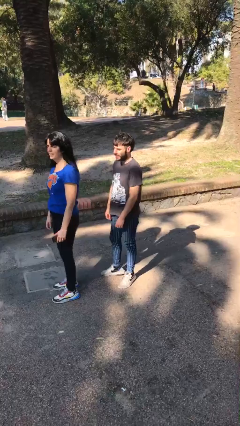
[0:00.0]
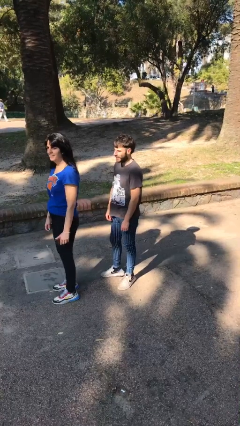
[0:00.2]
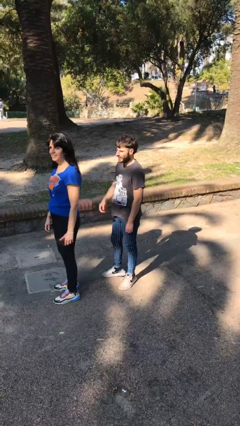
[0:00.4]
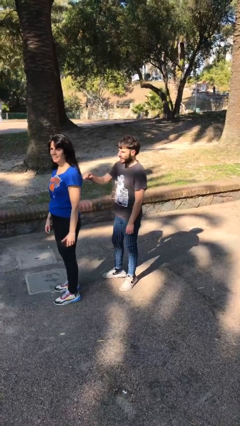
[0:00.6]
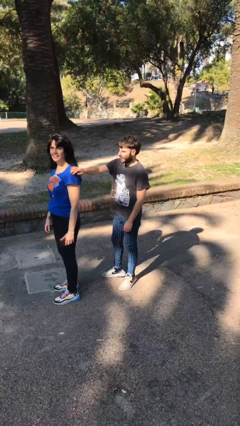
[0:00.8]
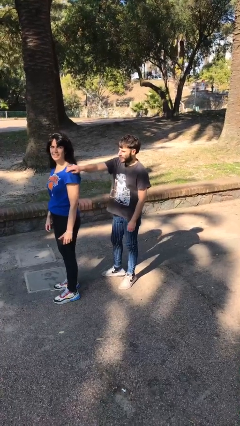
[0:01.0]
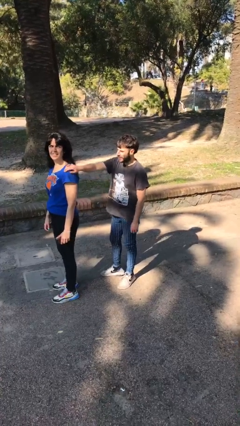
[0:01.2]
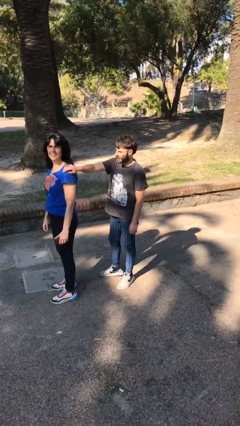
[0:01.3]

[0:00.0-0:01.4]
person grabs person by shoulder

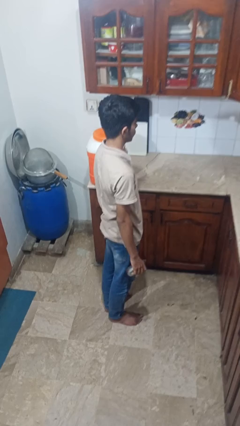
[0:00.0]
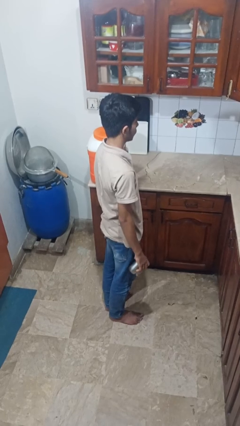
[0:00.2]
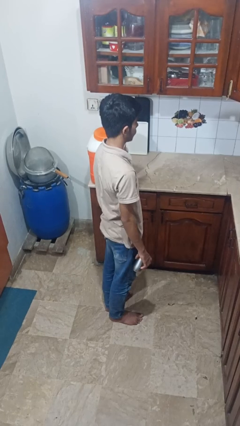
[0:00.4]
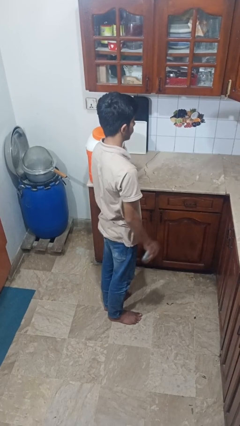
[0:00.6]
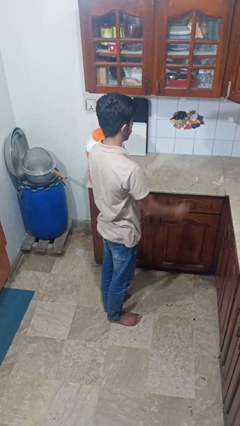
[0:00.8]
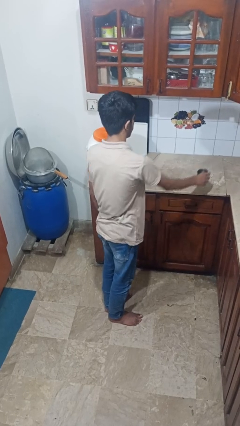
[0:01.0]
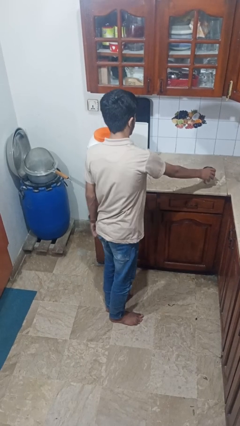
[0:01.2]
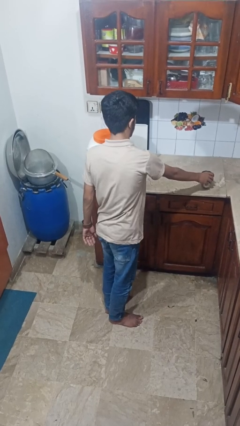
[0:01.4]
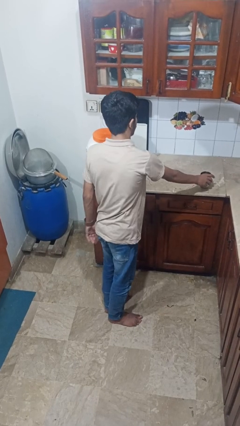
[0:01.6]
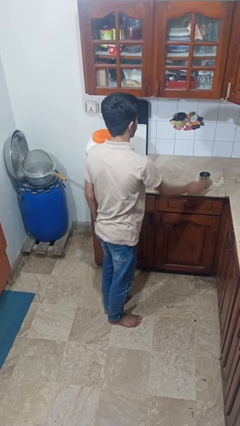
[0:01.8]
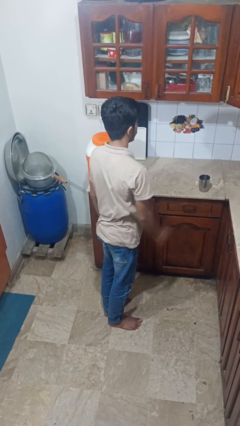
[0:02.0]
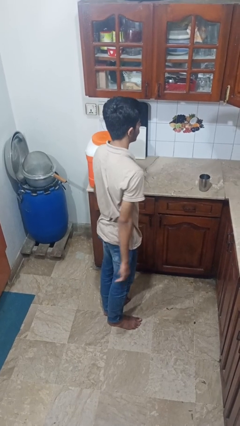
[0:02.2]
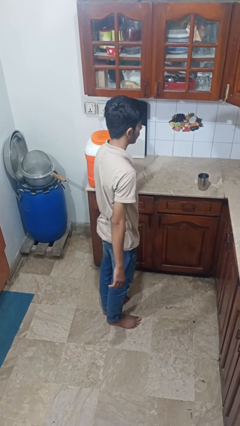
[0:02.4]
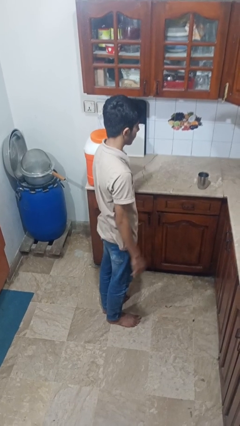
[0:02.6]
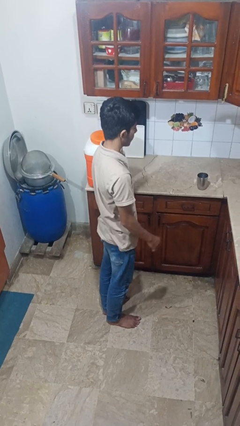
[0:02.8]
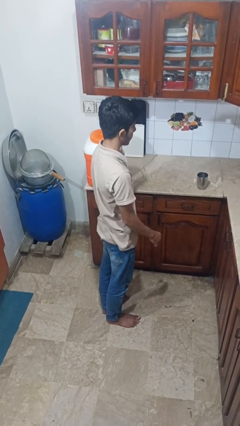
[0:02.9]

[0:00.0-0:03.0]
person puts down object on countertop

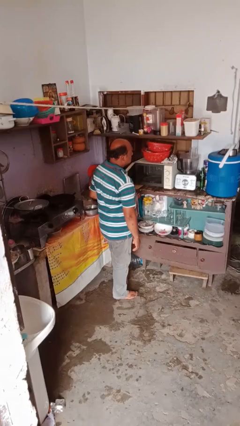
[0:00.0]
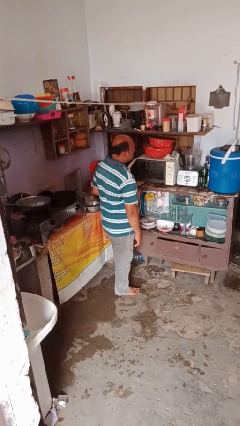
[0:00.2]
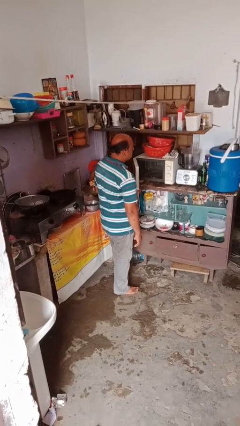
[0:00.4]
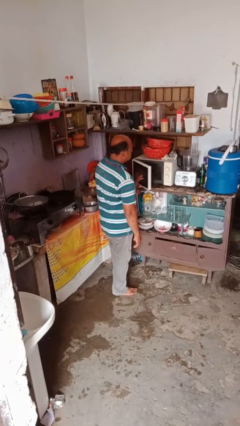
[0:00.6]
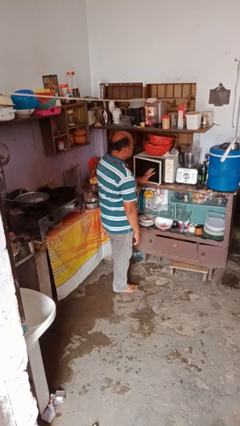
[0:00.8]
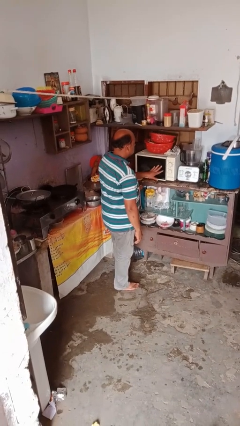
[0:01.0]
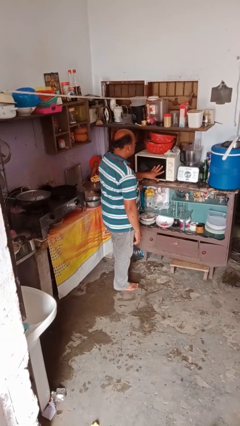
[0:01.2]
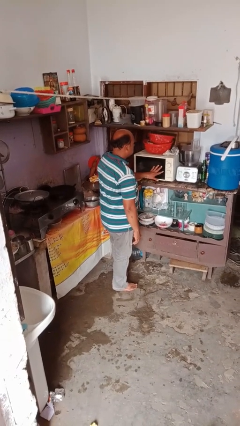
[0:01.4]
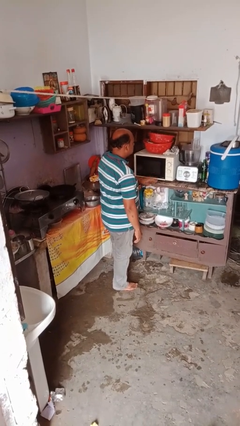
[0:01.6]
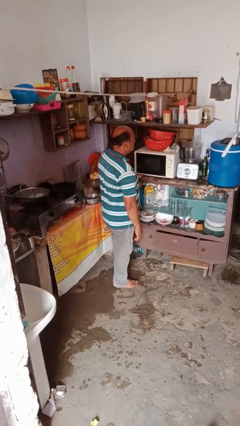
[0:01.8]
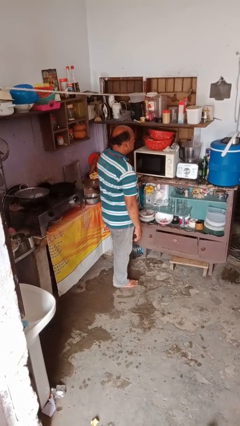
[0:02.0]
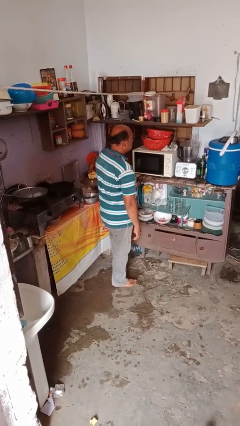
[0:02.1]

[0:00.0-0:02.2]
person closes microwave

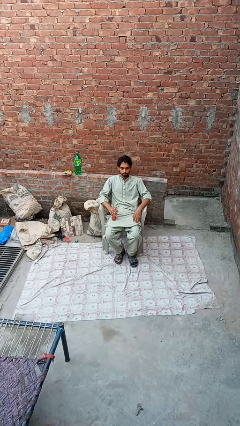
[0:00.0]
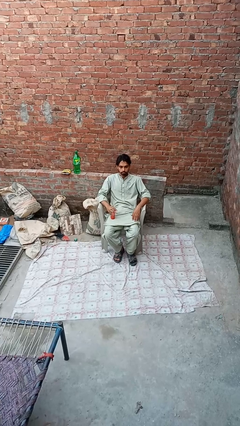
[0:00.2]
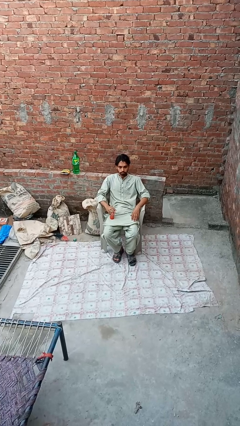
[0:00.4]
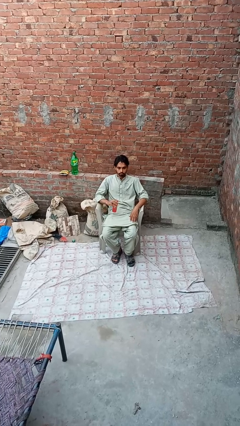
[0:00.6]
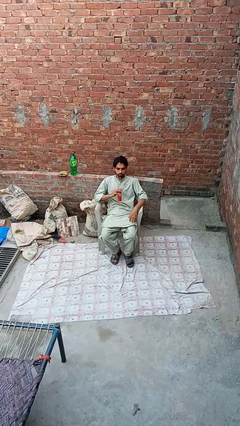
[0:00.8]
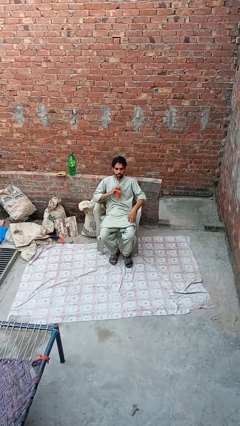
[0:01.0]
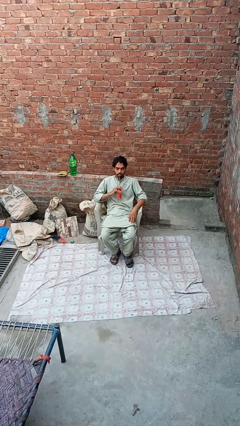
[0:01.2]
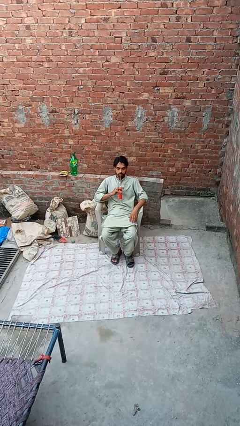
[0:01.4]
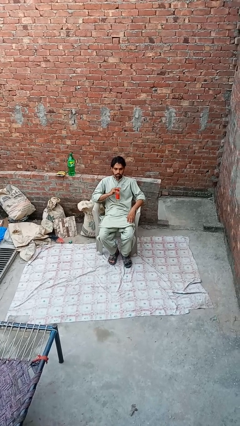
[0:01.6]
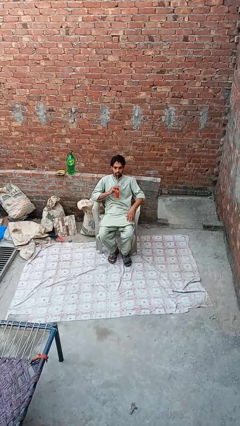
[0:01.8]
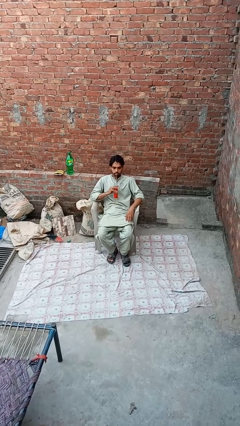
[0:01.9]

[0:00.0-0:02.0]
person drinks from straw

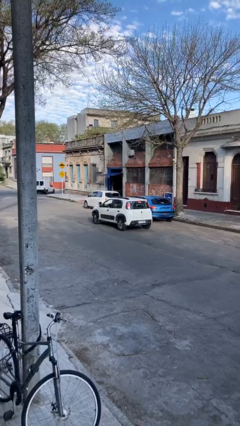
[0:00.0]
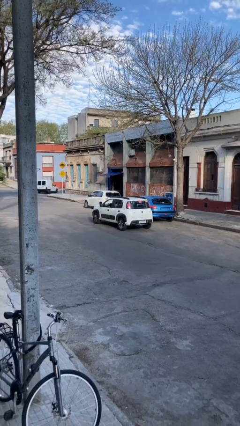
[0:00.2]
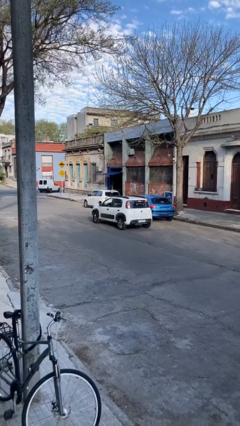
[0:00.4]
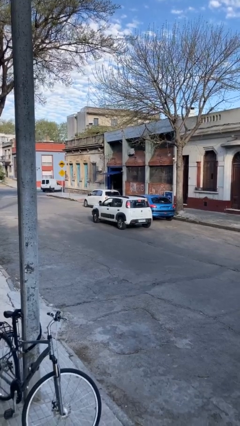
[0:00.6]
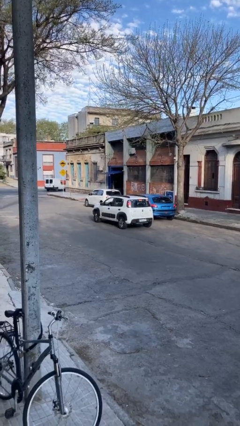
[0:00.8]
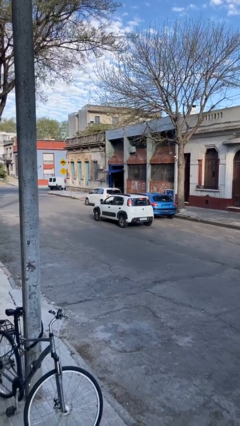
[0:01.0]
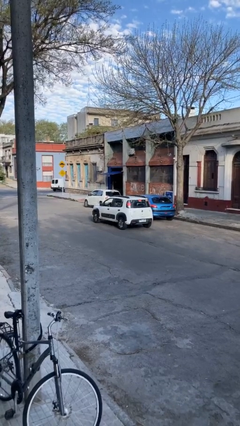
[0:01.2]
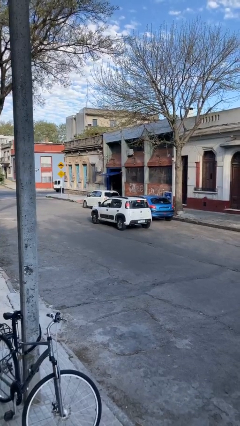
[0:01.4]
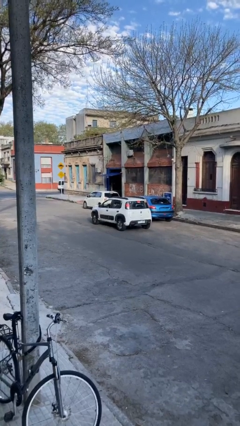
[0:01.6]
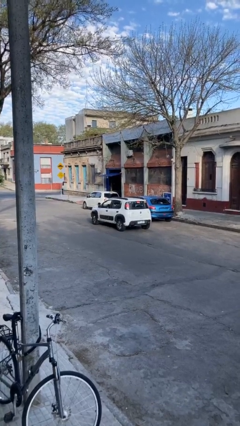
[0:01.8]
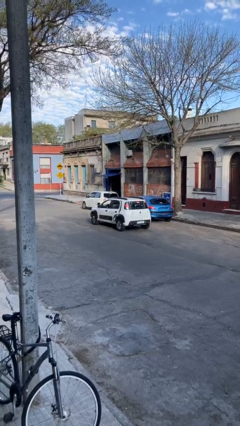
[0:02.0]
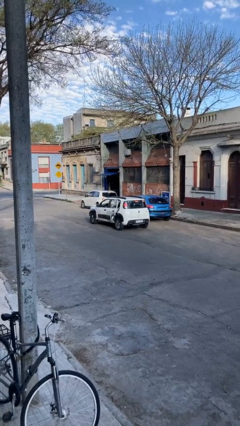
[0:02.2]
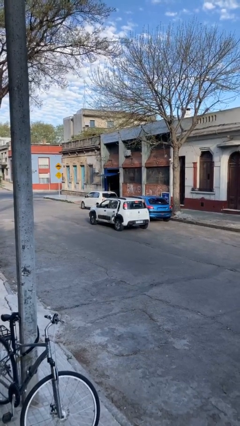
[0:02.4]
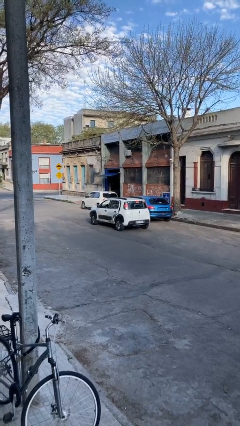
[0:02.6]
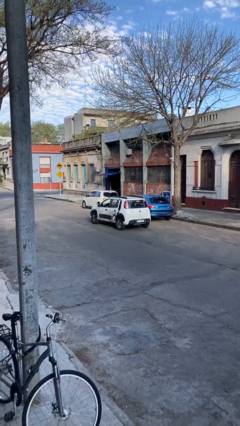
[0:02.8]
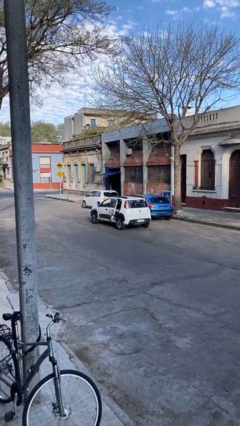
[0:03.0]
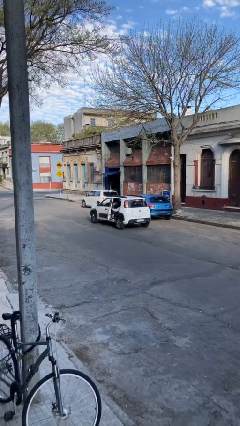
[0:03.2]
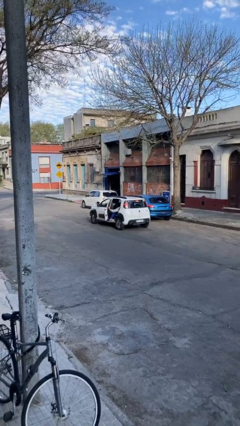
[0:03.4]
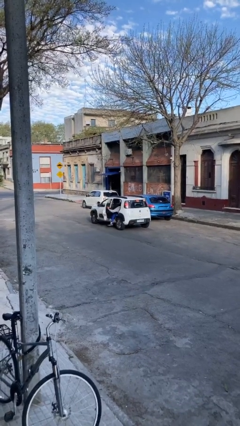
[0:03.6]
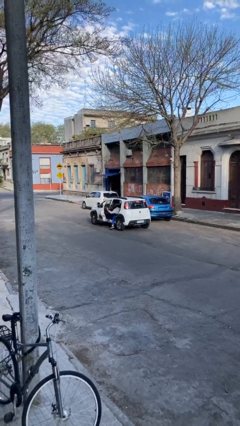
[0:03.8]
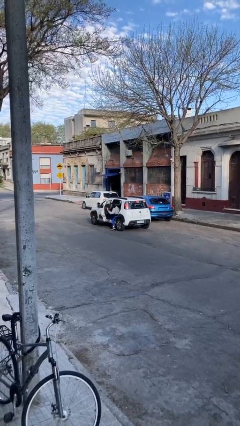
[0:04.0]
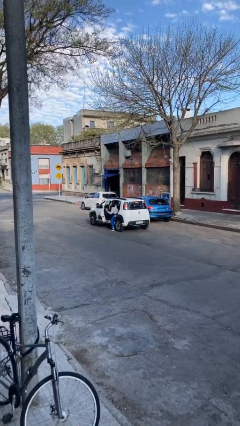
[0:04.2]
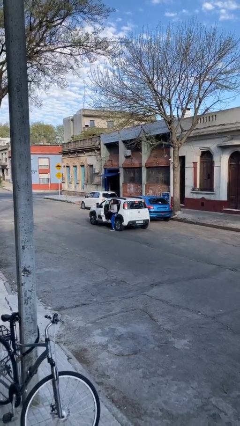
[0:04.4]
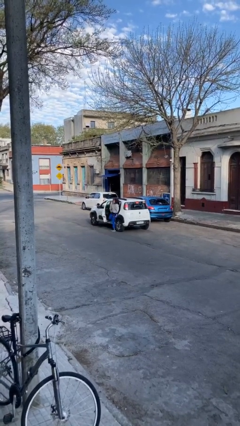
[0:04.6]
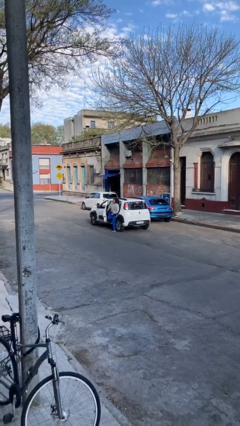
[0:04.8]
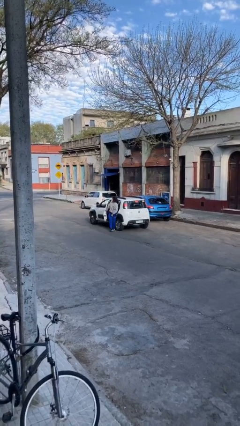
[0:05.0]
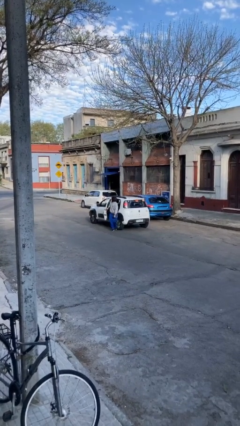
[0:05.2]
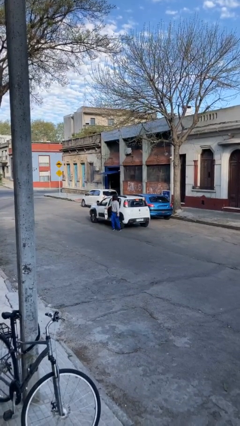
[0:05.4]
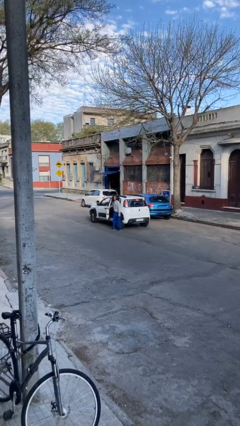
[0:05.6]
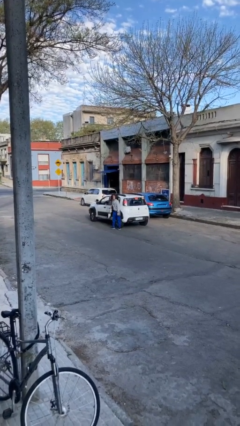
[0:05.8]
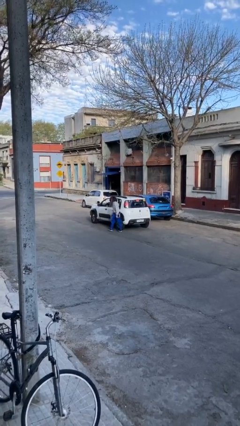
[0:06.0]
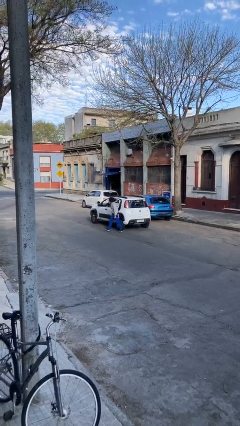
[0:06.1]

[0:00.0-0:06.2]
car drops off person

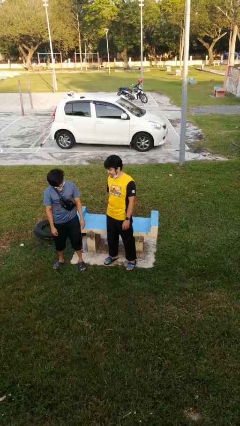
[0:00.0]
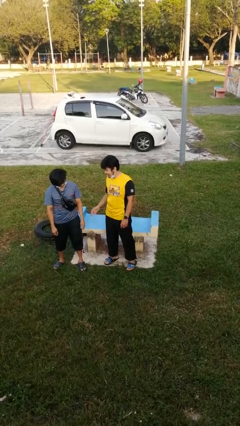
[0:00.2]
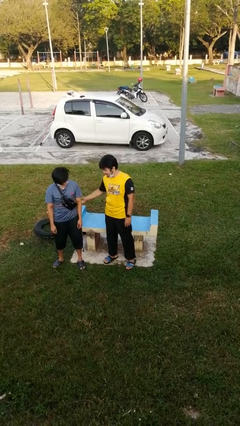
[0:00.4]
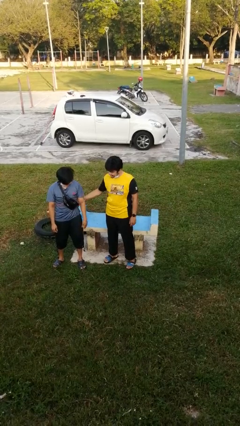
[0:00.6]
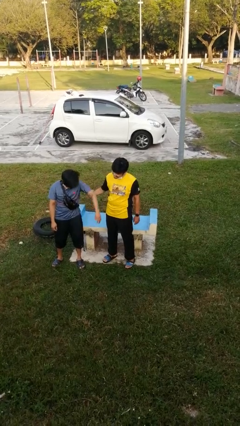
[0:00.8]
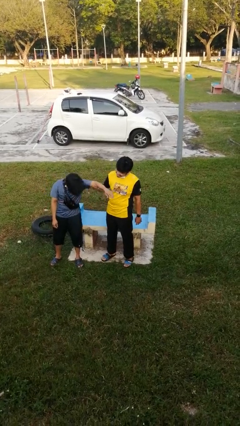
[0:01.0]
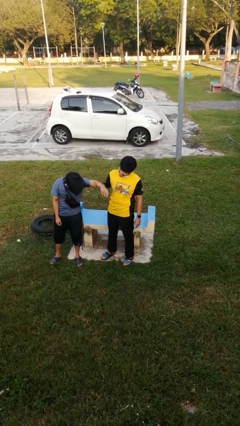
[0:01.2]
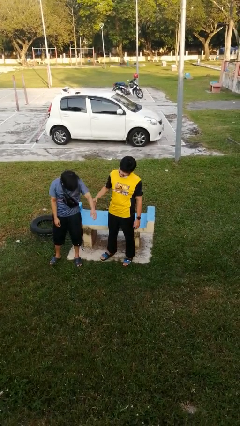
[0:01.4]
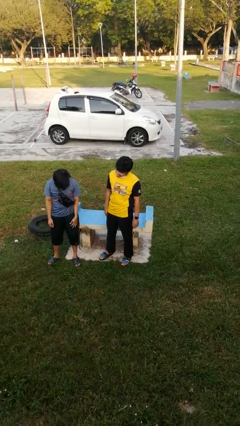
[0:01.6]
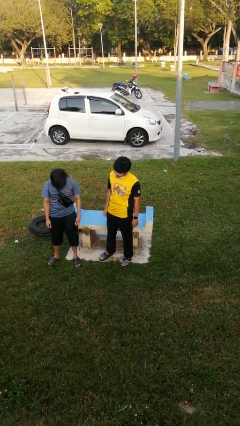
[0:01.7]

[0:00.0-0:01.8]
person grabs person by bicep

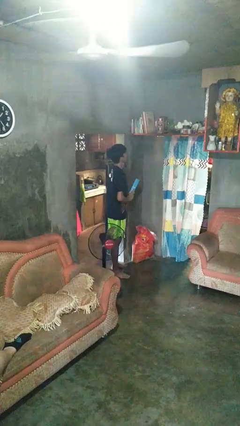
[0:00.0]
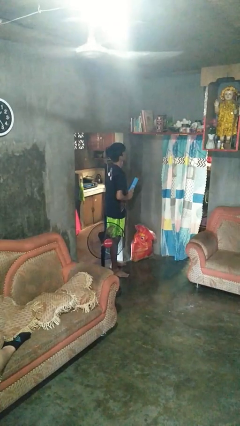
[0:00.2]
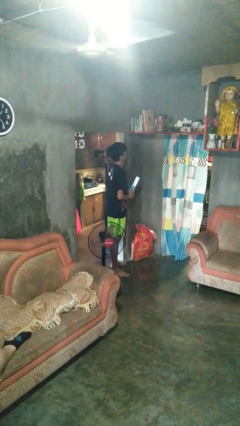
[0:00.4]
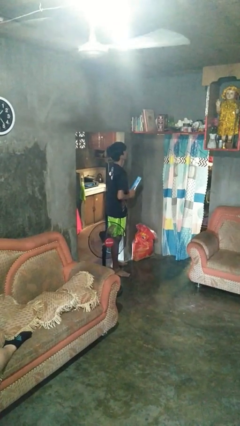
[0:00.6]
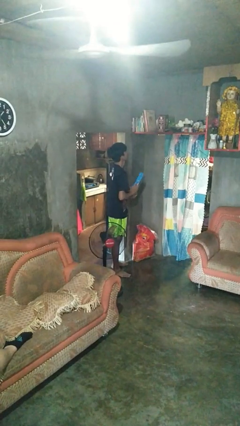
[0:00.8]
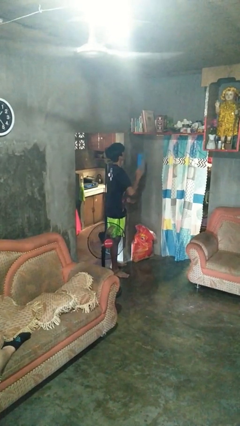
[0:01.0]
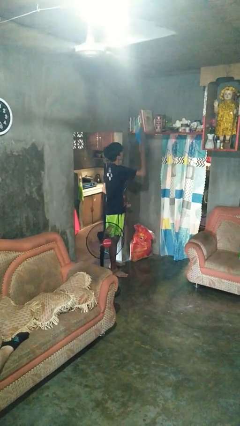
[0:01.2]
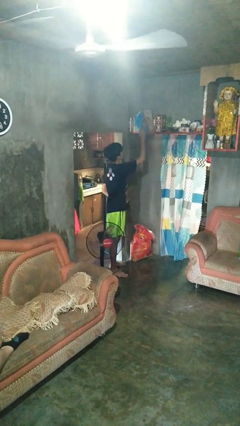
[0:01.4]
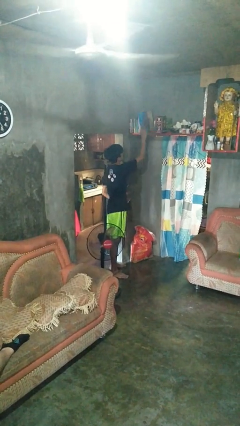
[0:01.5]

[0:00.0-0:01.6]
person puts down object on shelf
